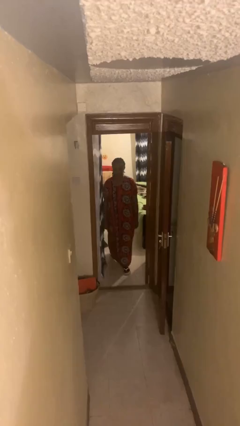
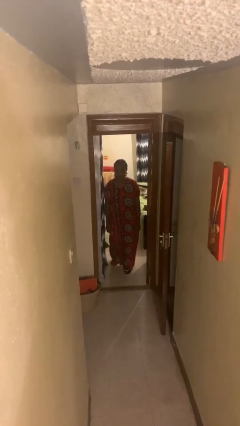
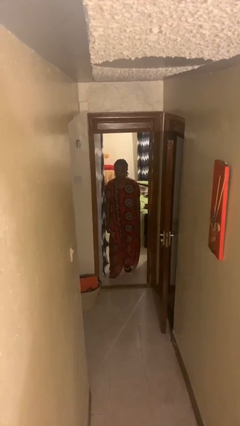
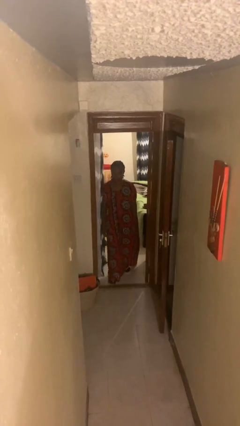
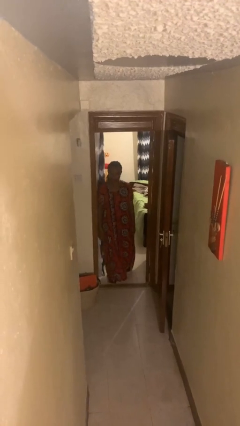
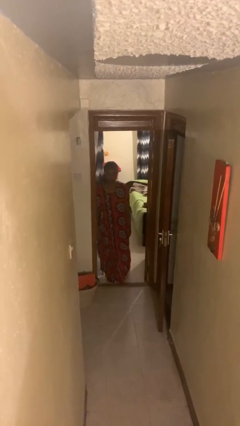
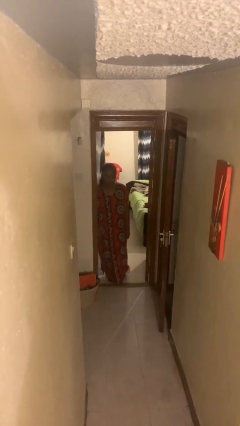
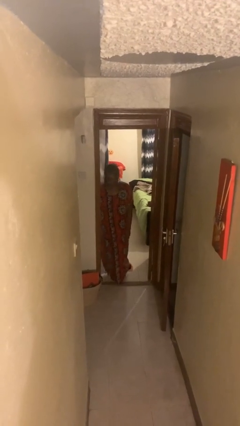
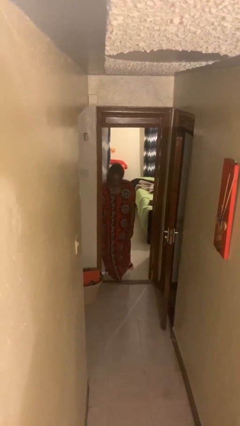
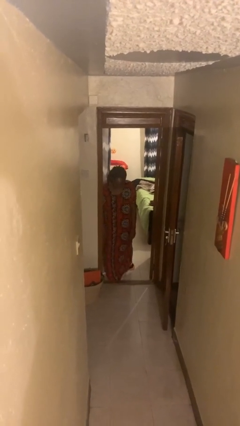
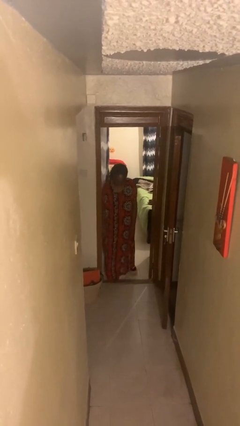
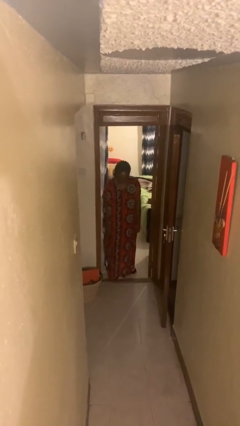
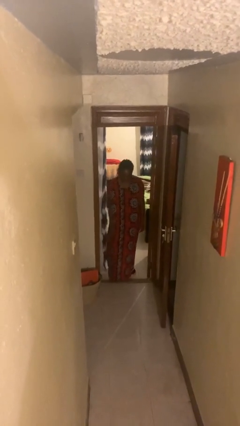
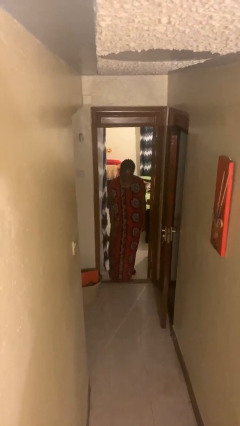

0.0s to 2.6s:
person bumps into wall

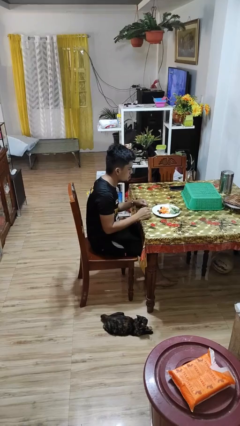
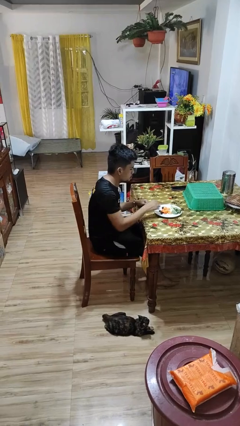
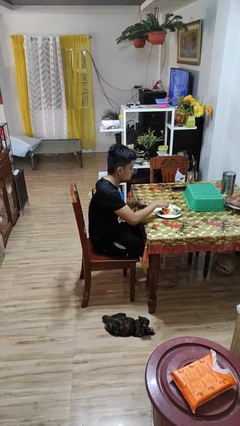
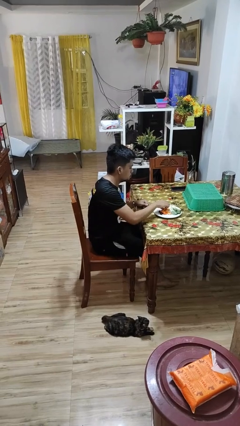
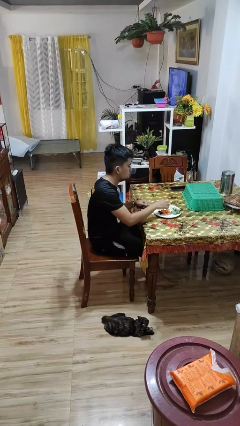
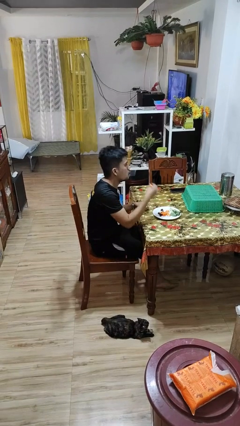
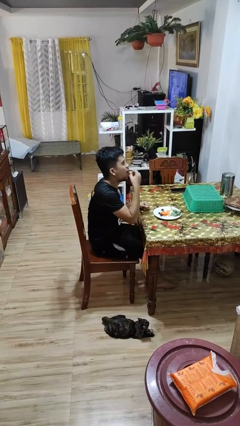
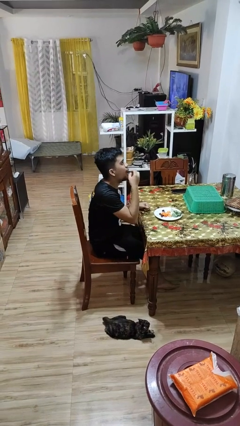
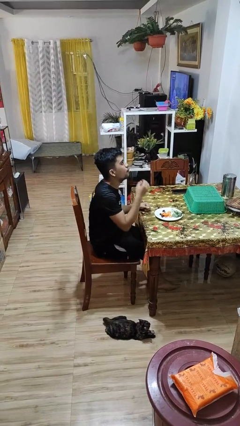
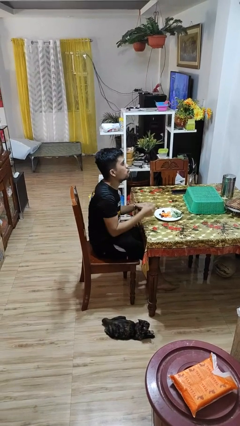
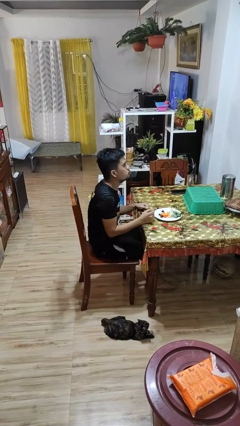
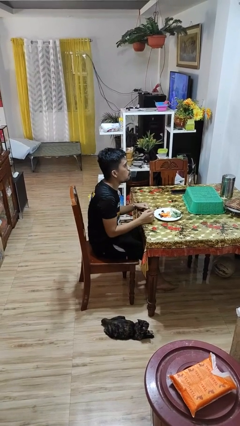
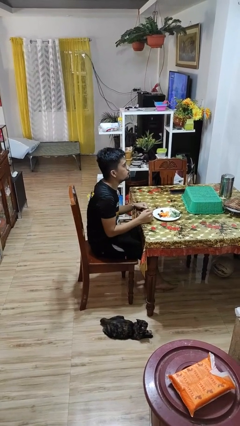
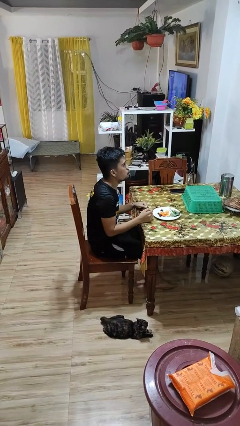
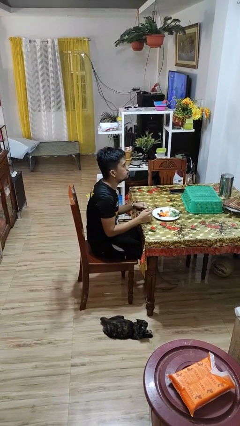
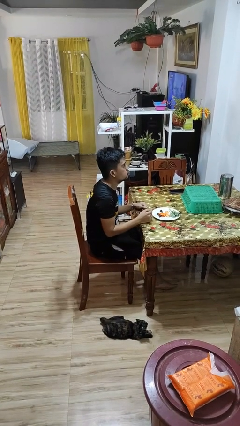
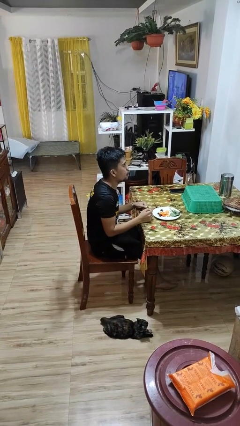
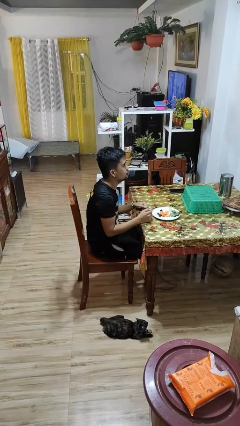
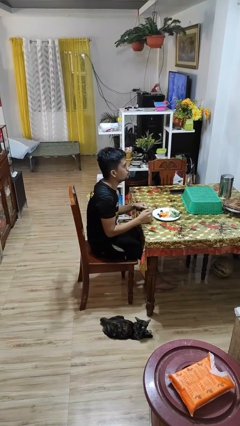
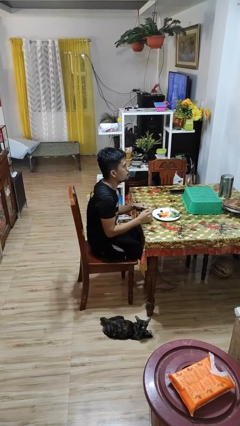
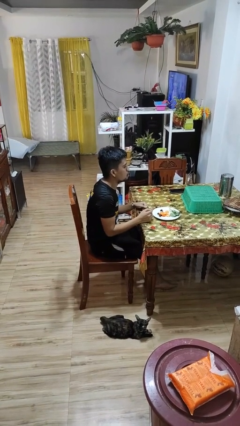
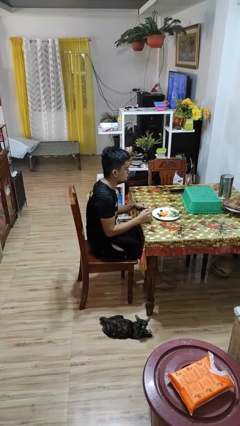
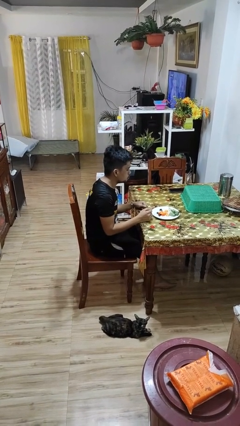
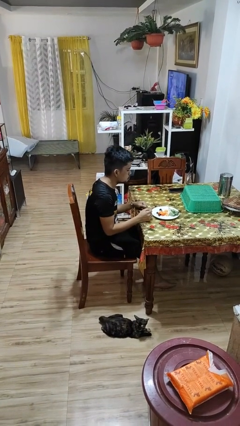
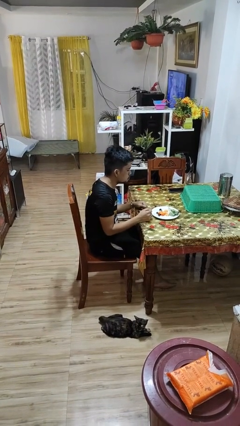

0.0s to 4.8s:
person eats with hands

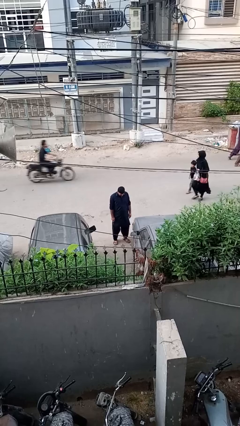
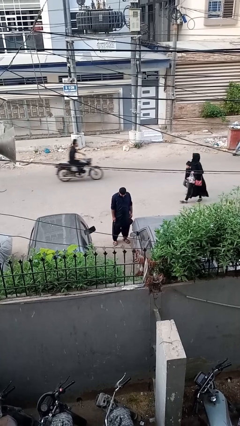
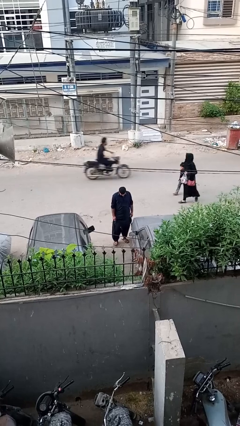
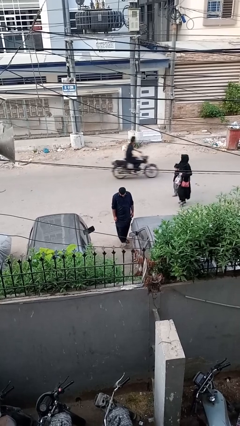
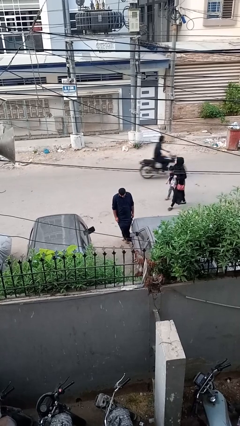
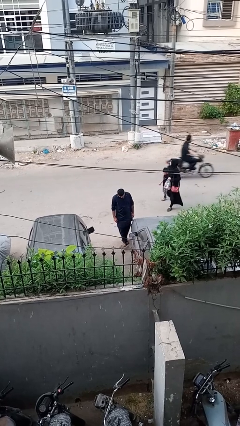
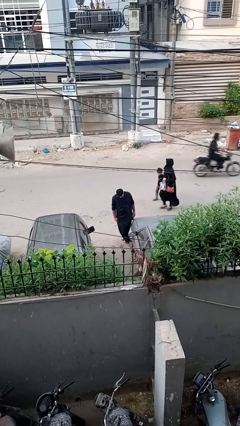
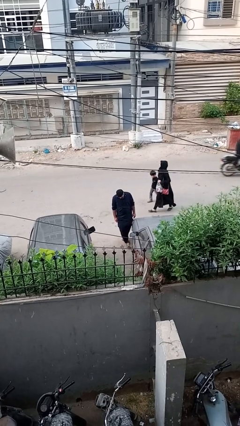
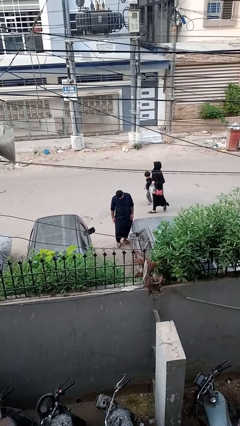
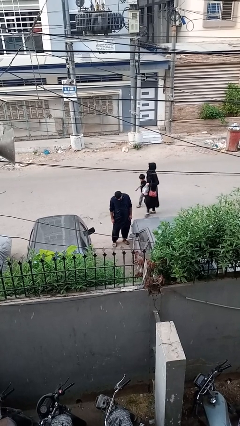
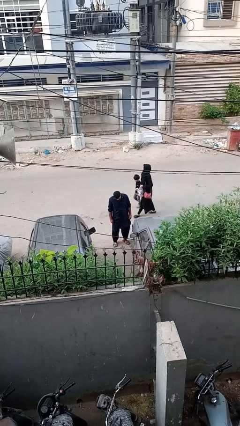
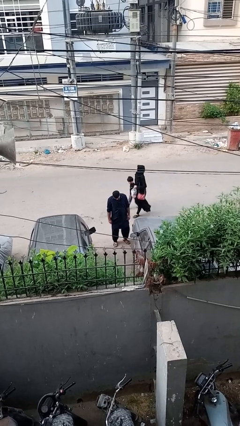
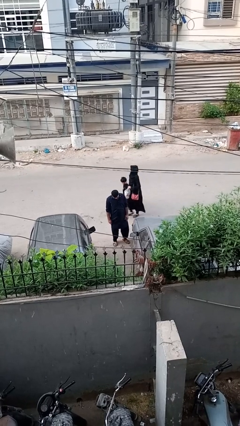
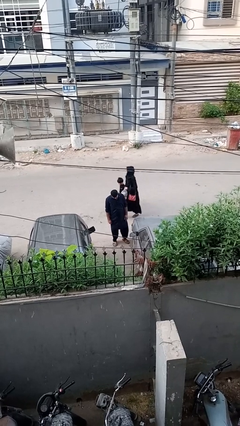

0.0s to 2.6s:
person kicks car tires

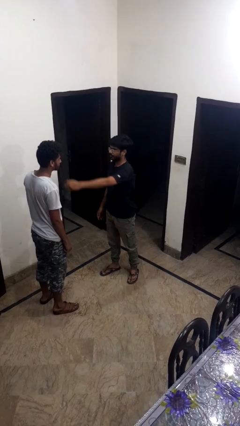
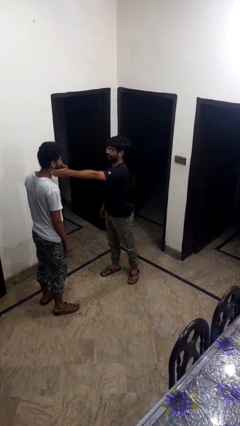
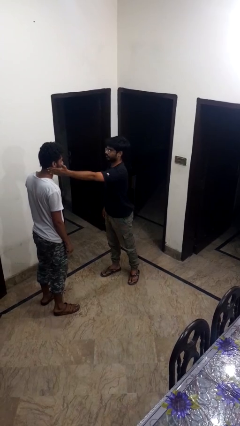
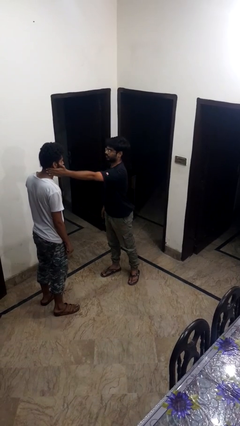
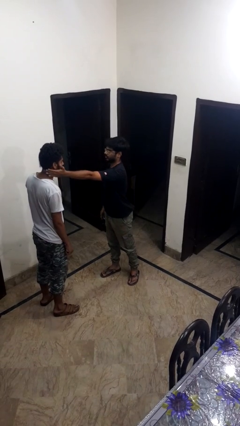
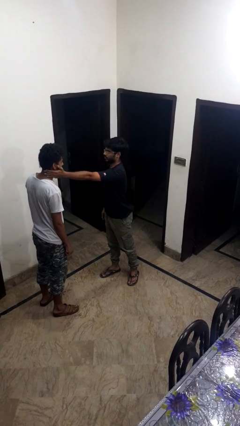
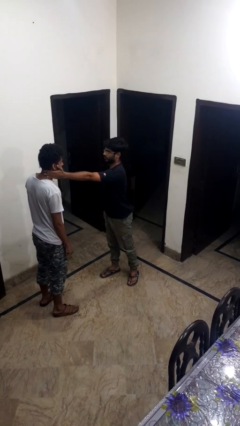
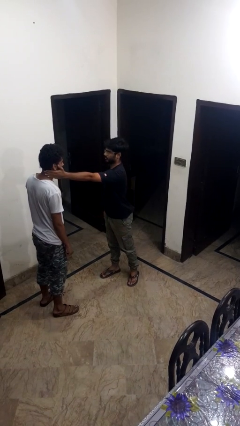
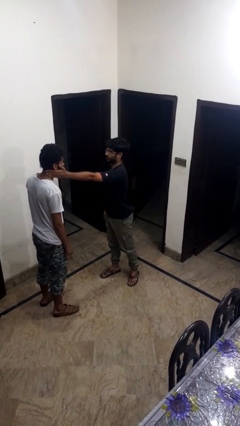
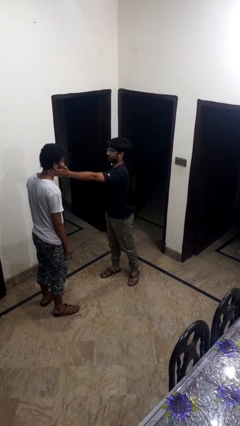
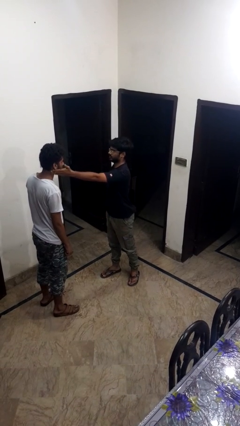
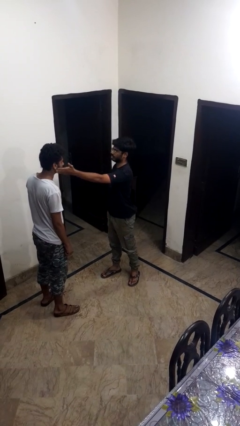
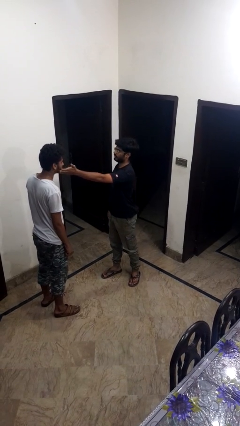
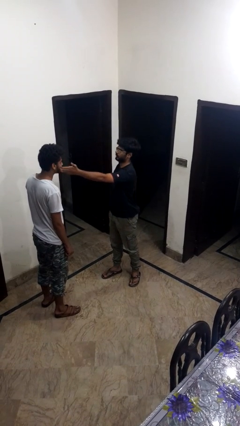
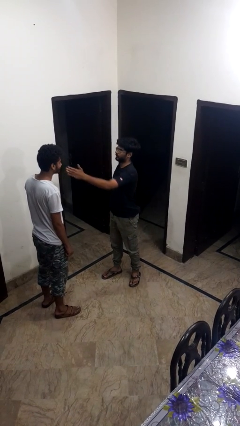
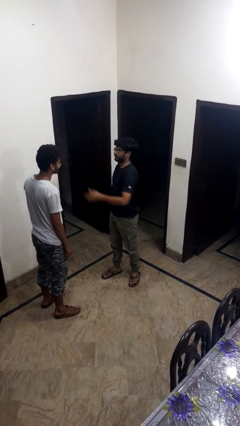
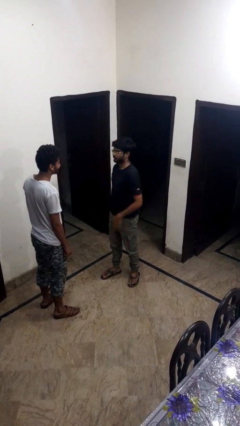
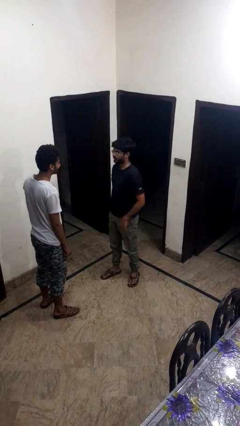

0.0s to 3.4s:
person touches face of person

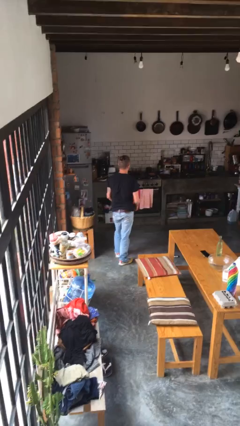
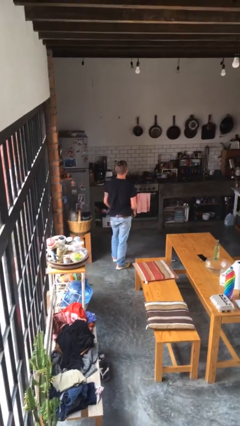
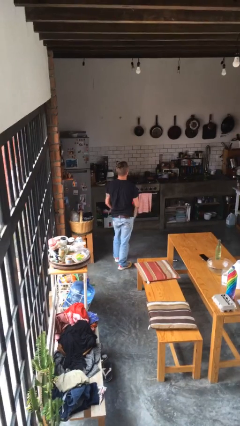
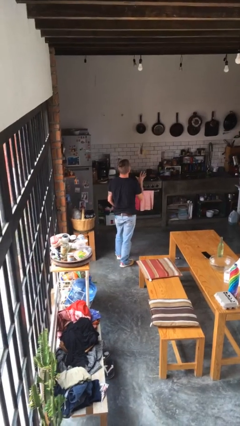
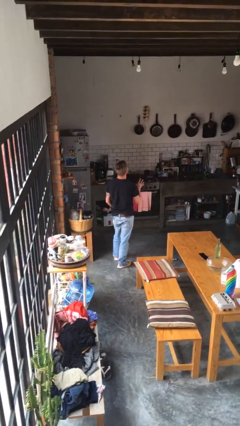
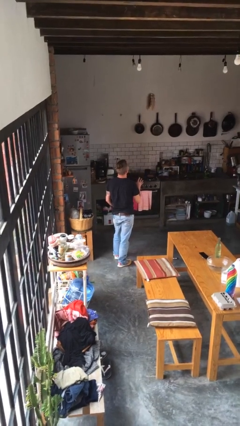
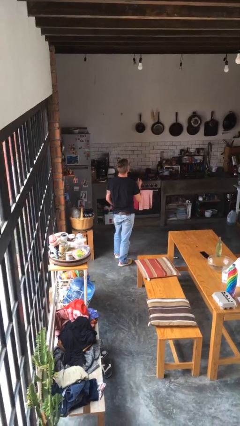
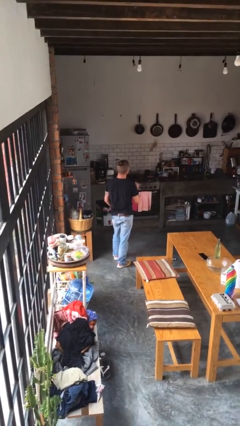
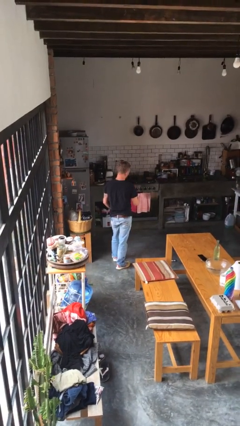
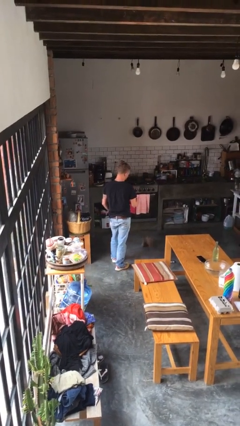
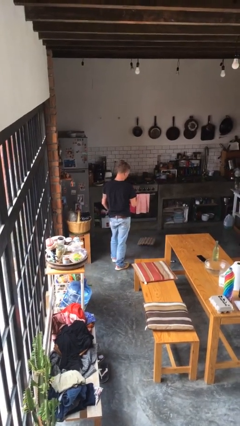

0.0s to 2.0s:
person throws object into air

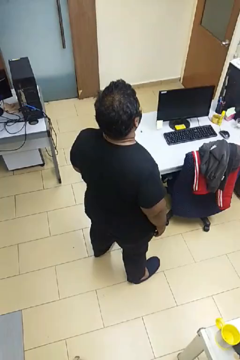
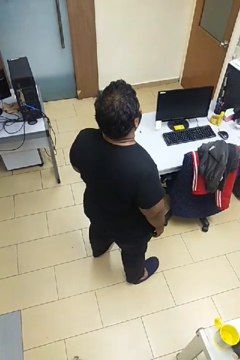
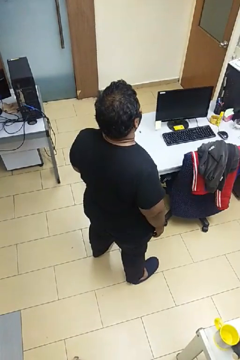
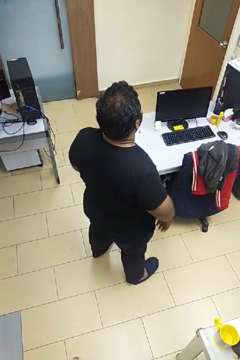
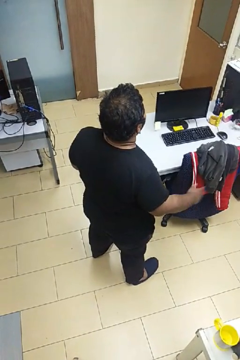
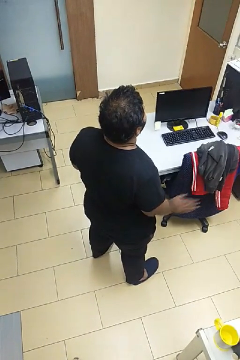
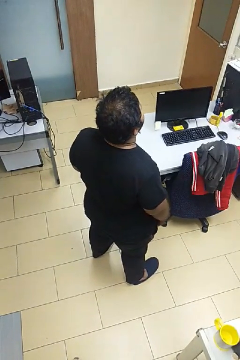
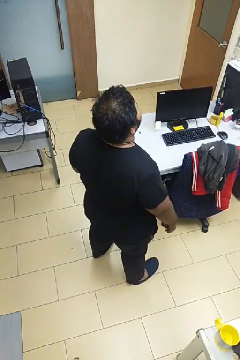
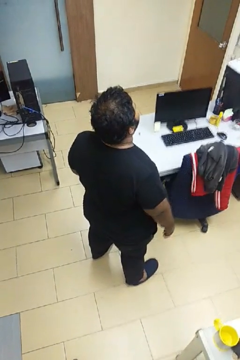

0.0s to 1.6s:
person slaps hands on thighs

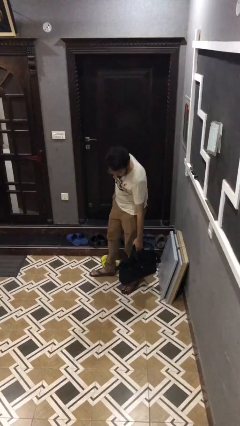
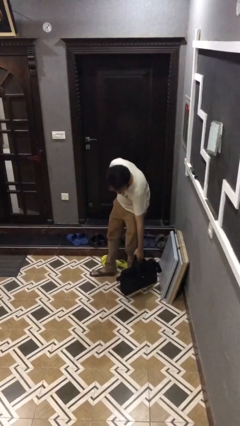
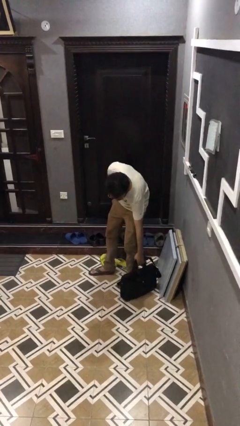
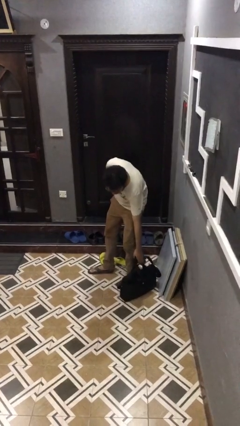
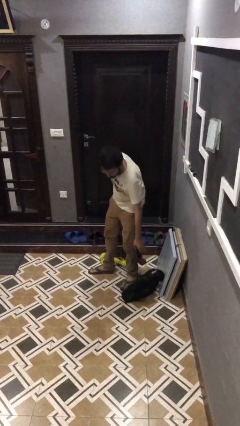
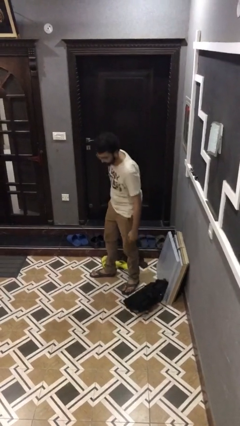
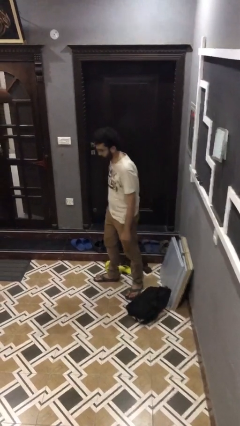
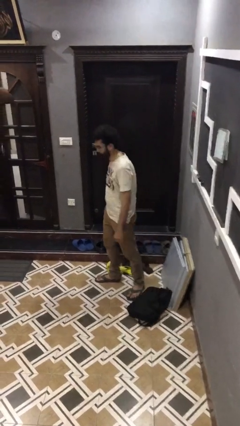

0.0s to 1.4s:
person puts down object on floor
